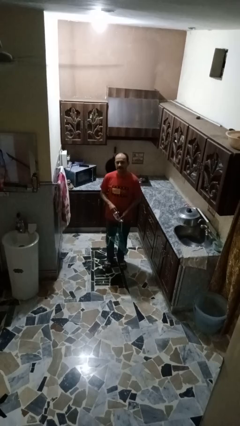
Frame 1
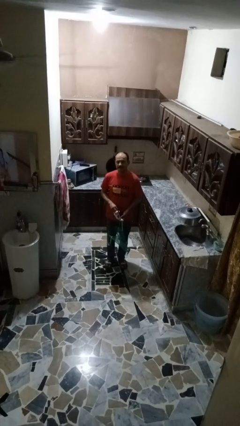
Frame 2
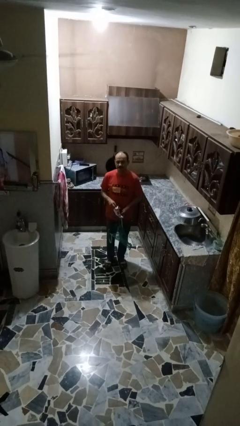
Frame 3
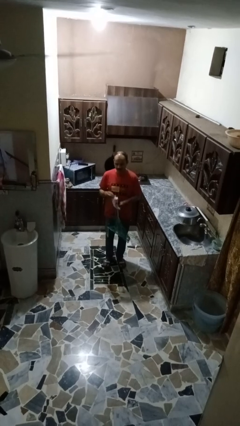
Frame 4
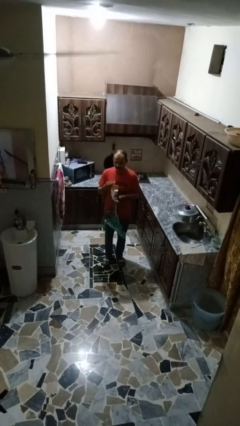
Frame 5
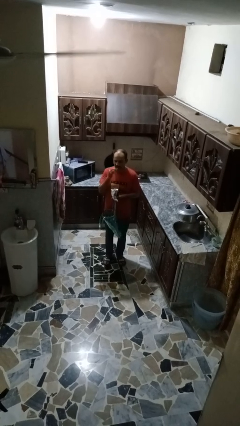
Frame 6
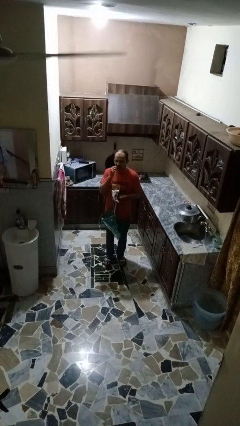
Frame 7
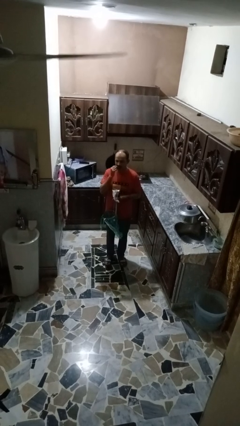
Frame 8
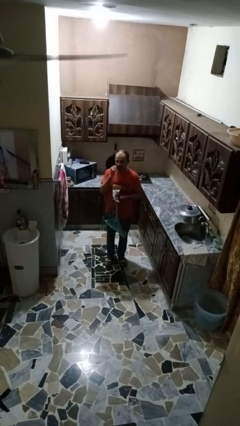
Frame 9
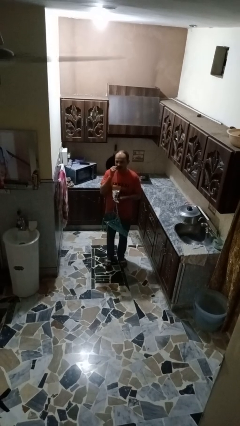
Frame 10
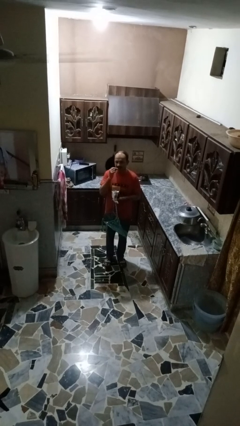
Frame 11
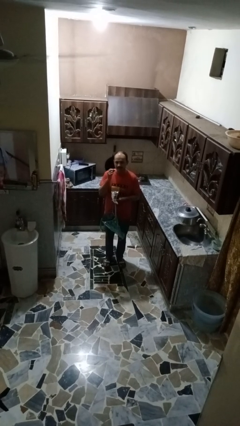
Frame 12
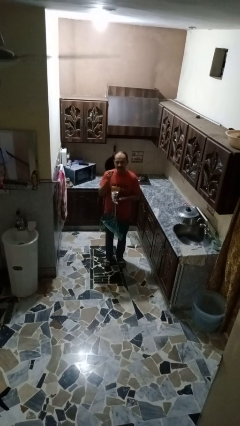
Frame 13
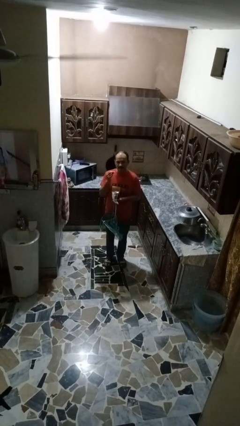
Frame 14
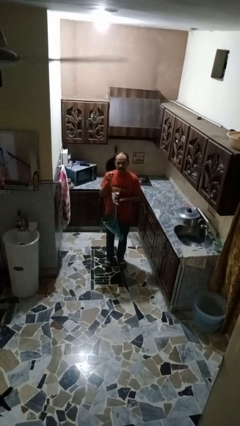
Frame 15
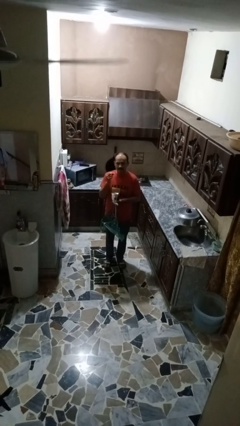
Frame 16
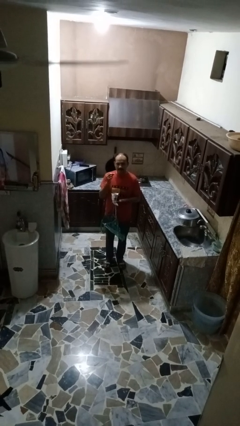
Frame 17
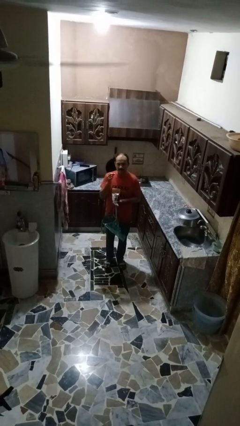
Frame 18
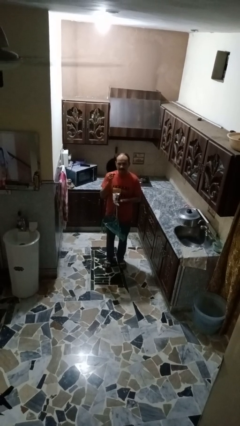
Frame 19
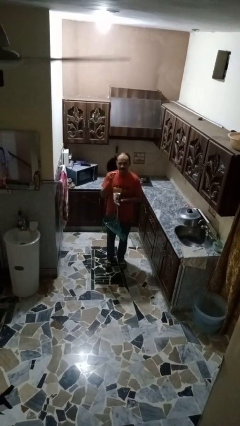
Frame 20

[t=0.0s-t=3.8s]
person eats snack from bag

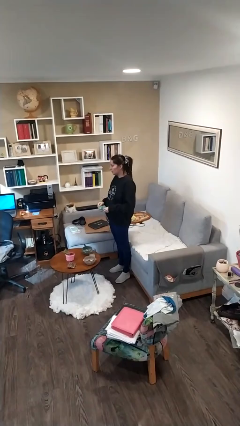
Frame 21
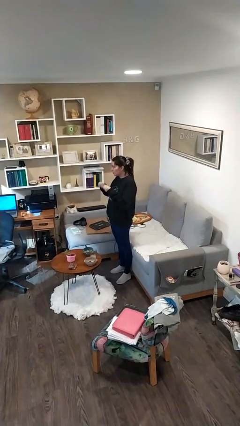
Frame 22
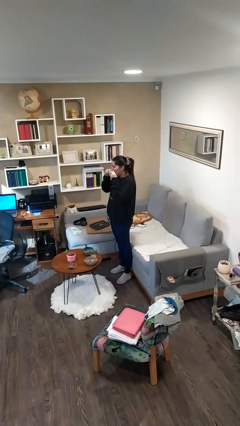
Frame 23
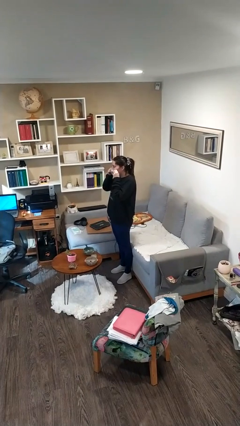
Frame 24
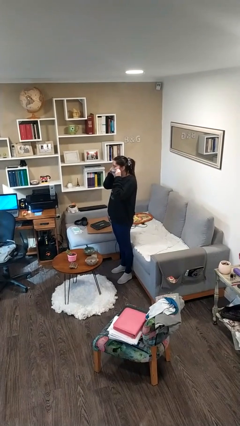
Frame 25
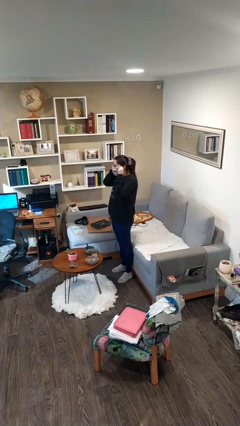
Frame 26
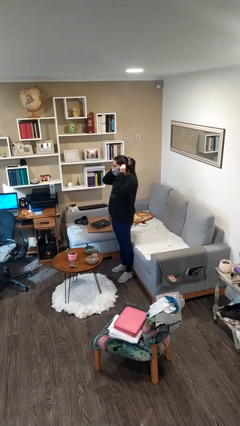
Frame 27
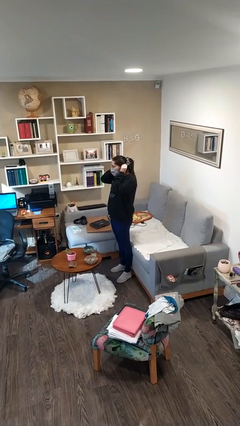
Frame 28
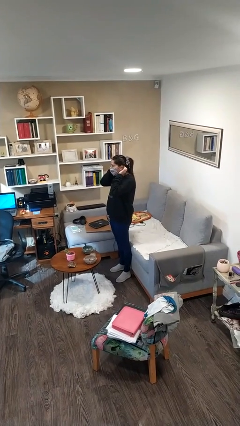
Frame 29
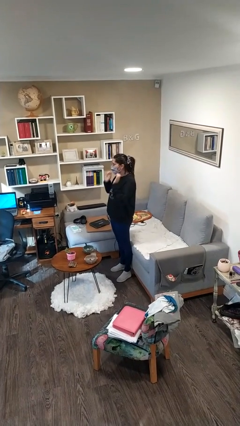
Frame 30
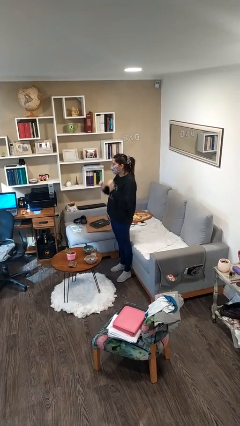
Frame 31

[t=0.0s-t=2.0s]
person puts on facemask

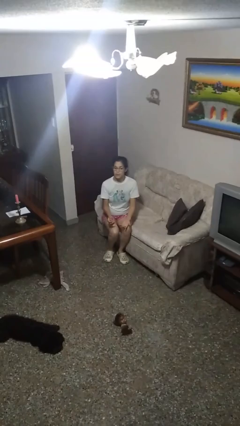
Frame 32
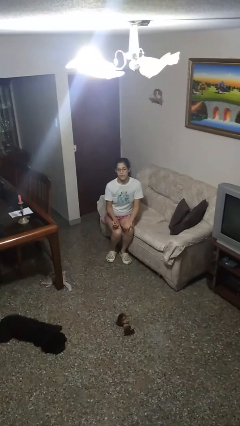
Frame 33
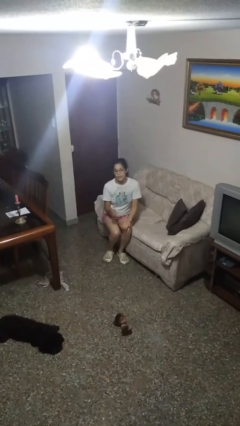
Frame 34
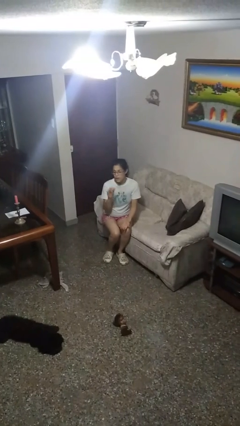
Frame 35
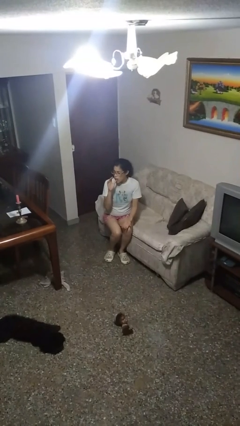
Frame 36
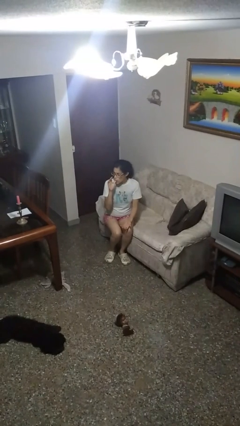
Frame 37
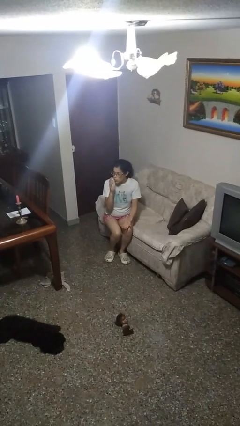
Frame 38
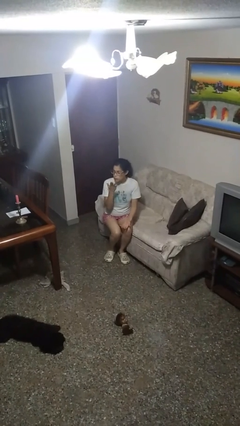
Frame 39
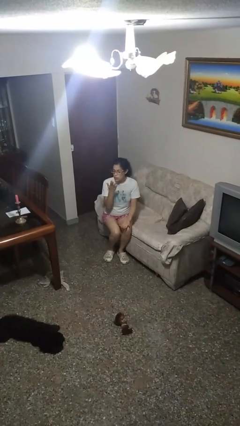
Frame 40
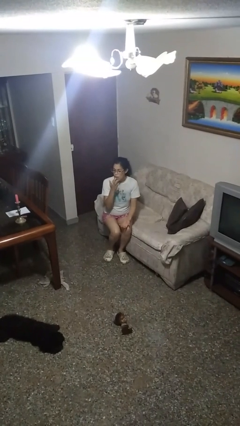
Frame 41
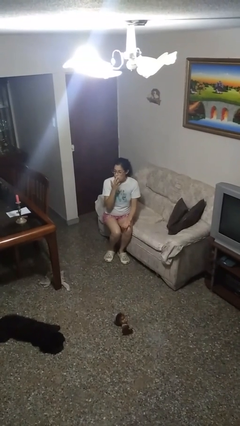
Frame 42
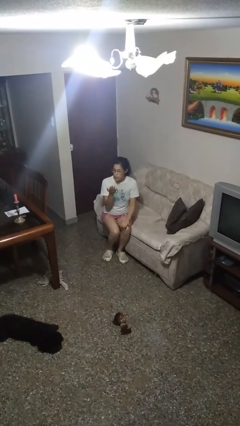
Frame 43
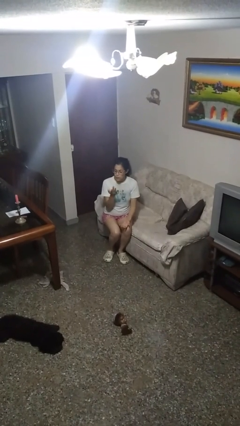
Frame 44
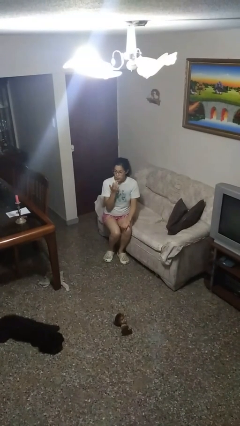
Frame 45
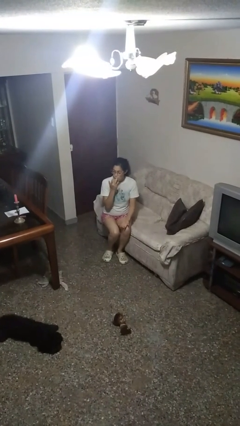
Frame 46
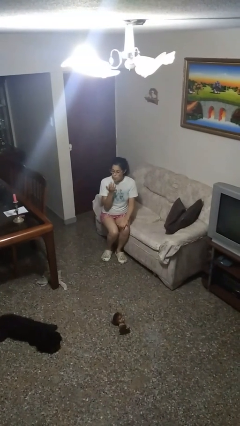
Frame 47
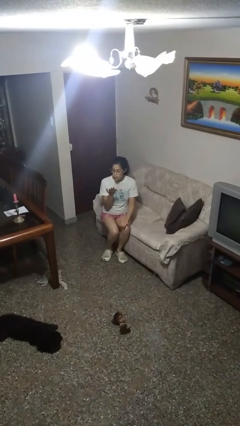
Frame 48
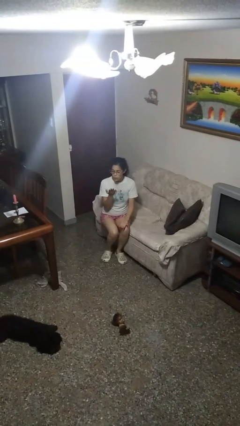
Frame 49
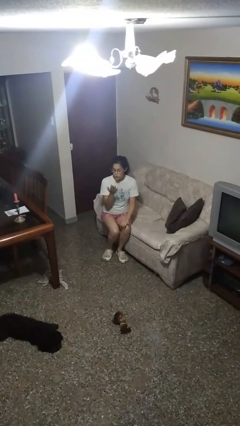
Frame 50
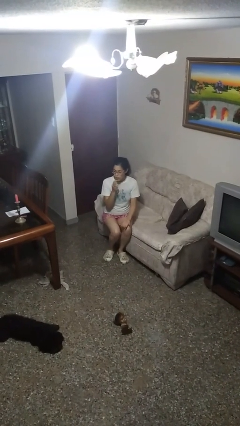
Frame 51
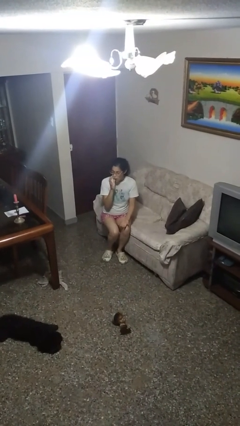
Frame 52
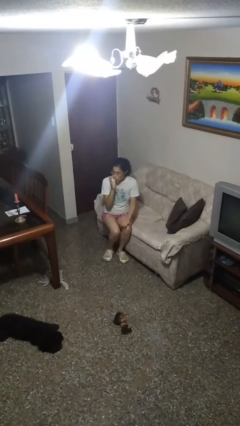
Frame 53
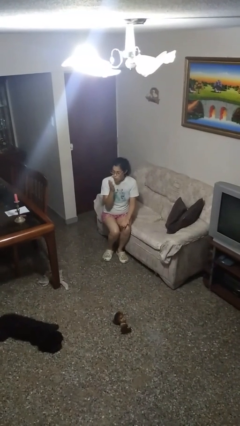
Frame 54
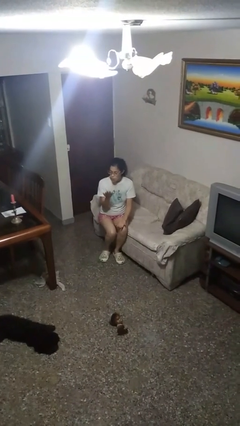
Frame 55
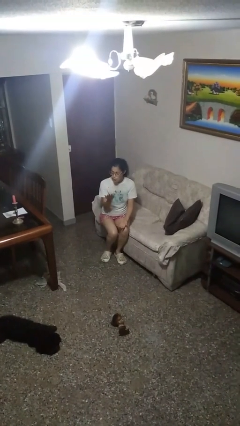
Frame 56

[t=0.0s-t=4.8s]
person licks fingers

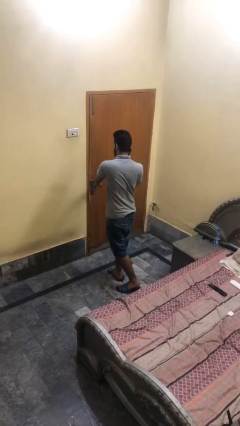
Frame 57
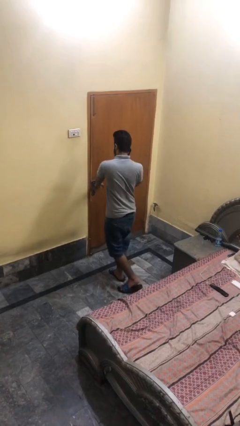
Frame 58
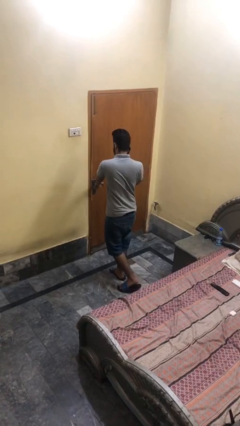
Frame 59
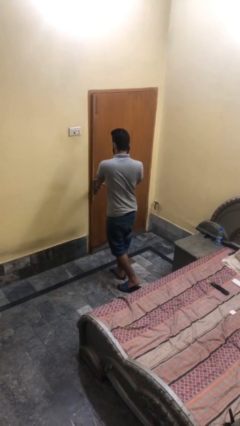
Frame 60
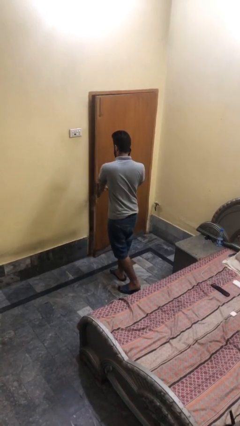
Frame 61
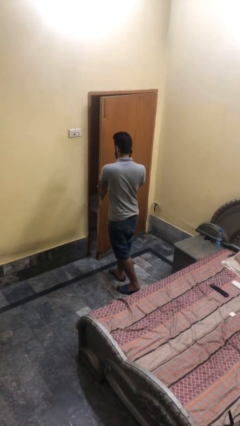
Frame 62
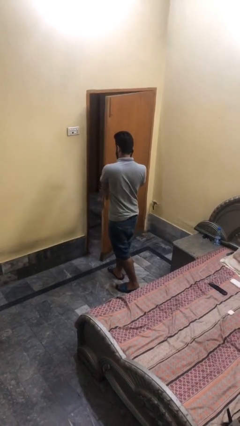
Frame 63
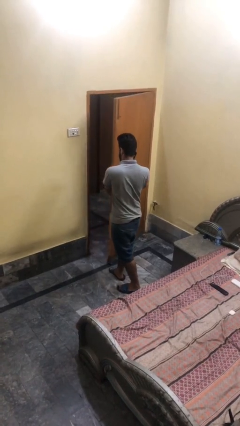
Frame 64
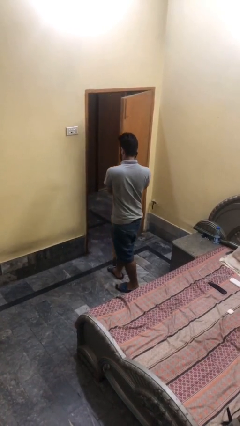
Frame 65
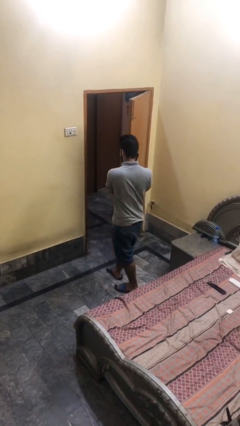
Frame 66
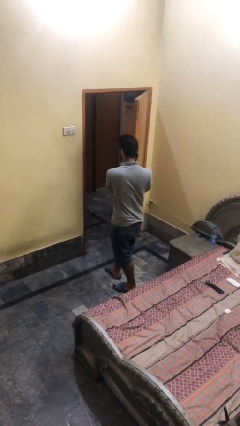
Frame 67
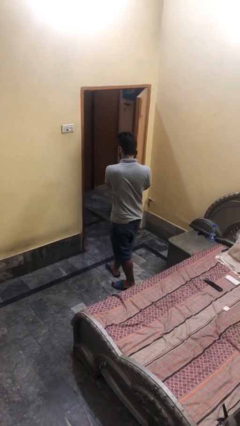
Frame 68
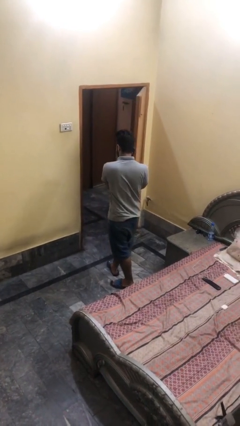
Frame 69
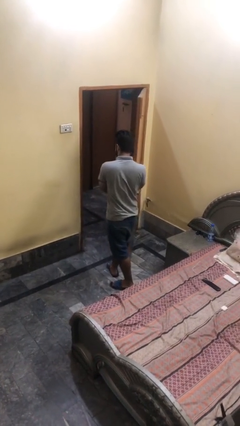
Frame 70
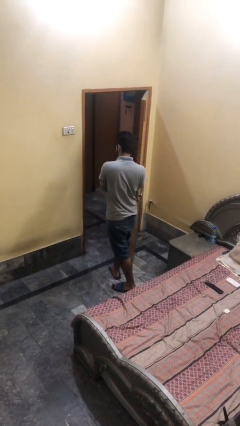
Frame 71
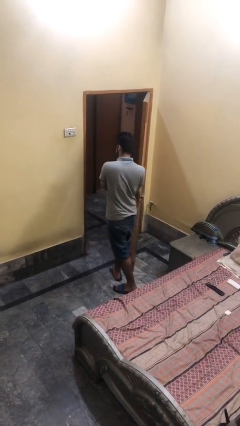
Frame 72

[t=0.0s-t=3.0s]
person opens facility door

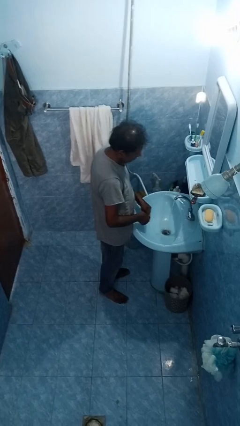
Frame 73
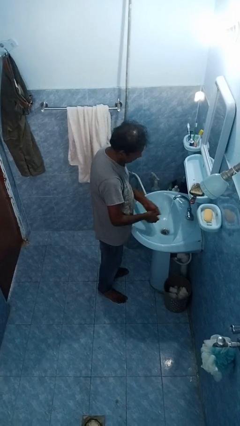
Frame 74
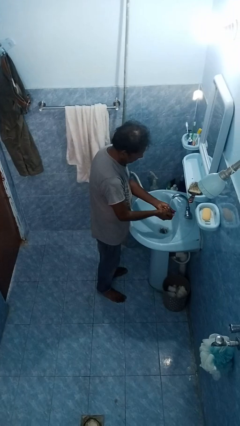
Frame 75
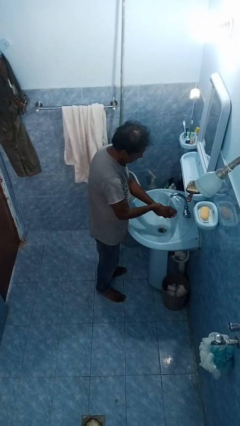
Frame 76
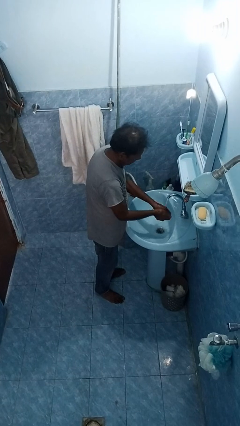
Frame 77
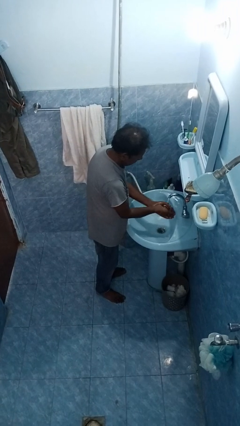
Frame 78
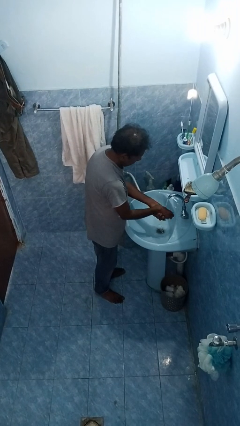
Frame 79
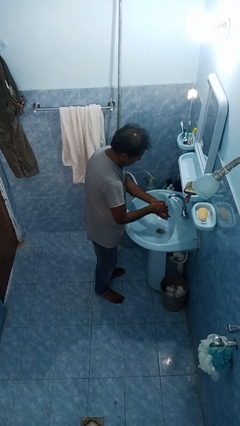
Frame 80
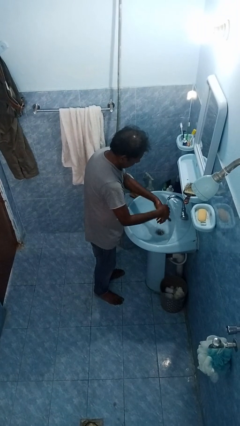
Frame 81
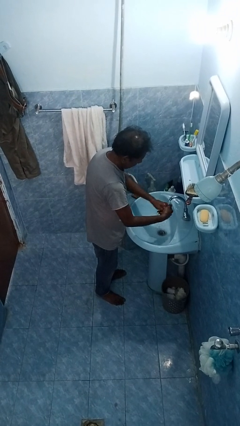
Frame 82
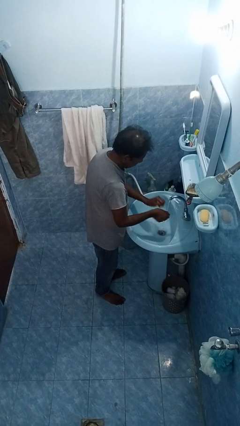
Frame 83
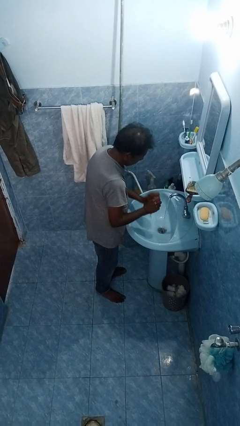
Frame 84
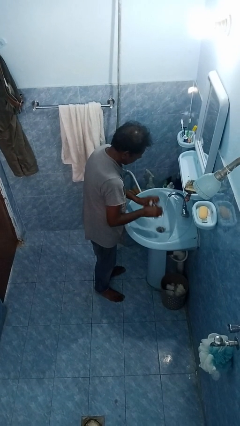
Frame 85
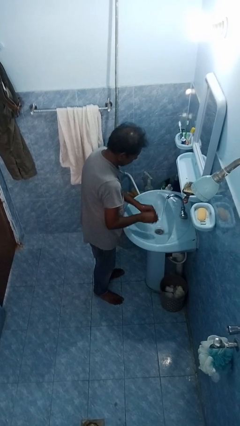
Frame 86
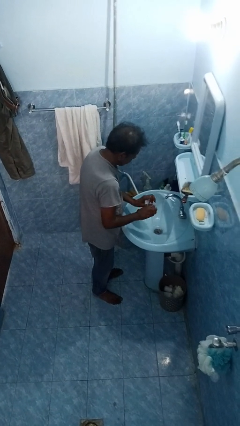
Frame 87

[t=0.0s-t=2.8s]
person washes hands

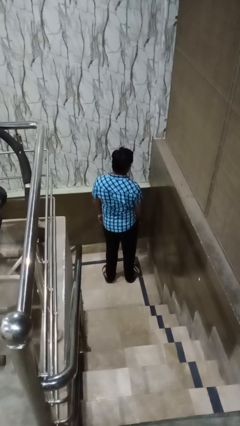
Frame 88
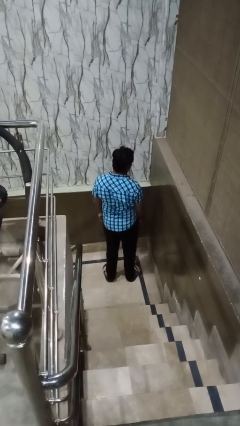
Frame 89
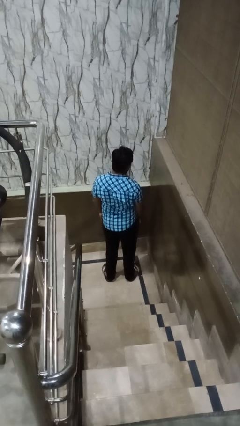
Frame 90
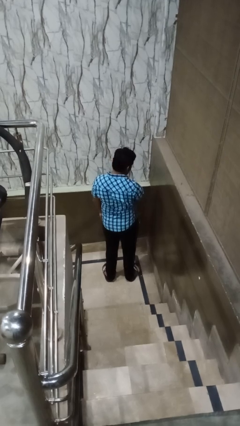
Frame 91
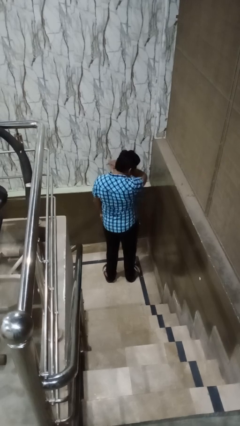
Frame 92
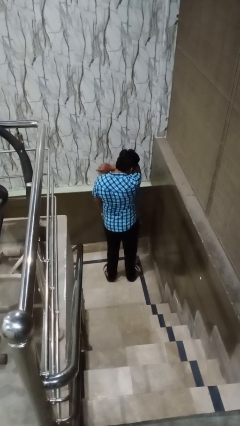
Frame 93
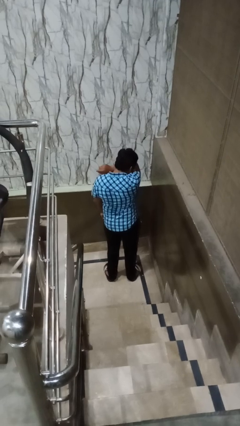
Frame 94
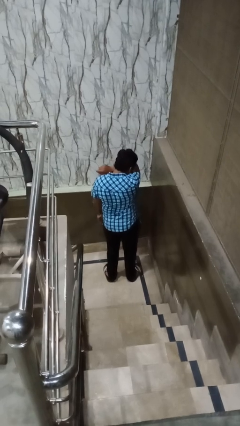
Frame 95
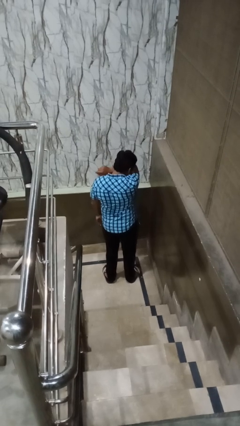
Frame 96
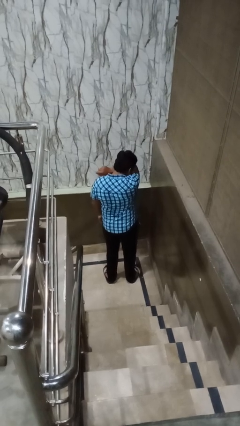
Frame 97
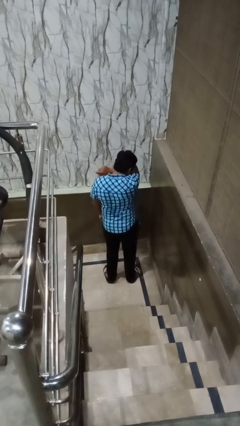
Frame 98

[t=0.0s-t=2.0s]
person sneezes into arm
